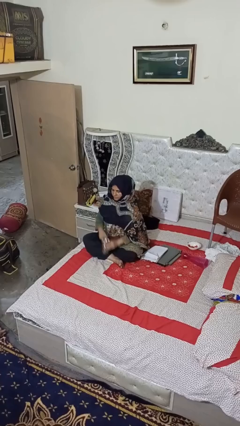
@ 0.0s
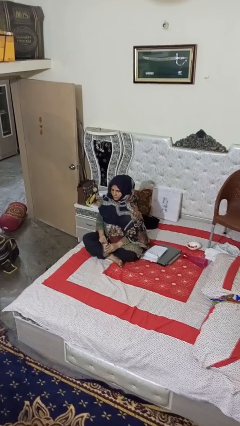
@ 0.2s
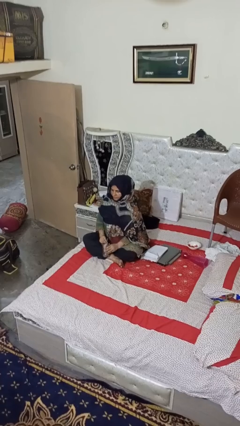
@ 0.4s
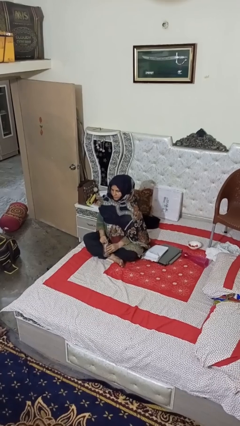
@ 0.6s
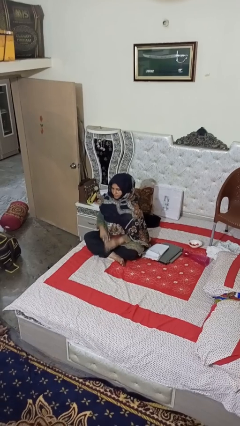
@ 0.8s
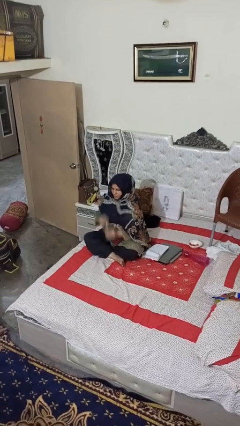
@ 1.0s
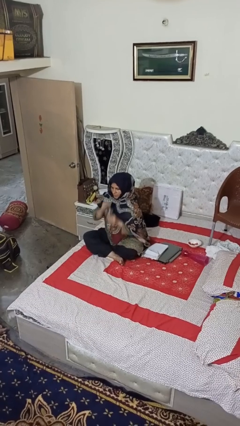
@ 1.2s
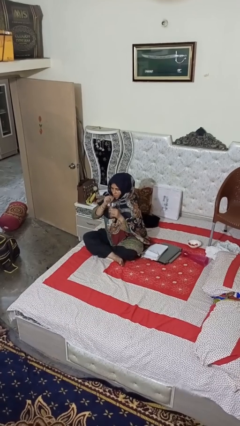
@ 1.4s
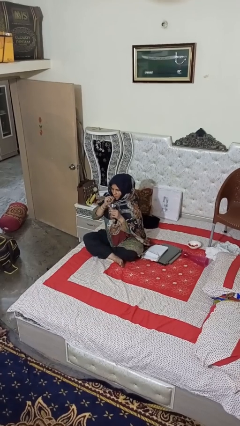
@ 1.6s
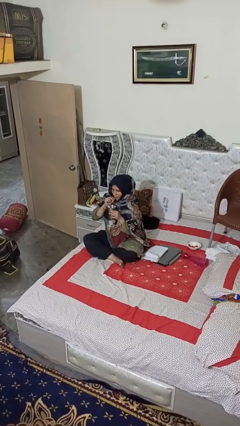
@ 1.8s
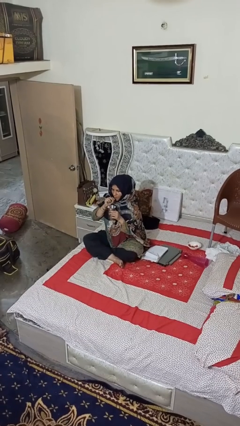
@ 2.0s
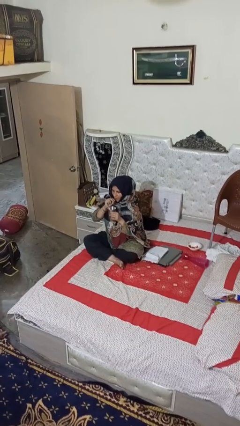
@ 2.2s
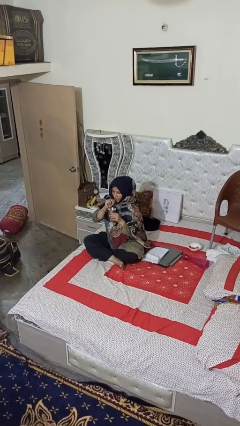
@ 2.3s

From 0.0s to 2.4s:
person drinks from straw

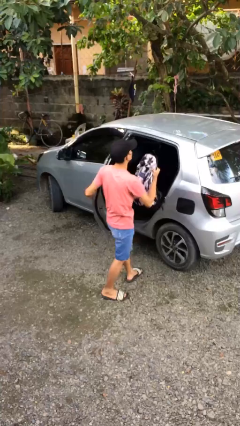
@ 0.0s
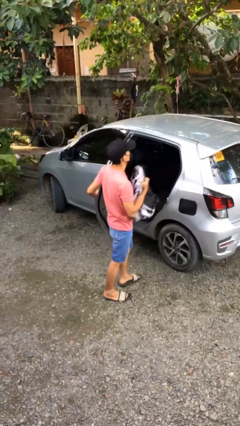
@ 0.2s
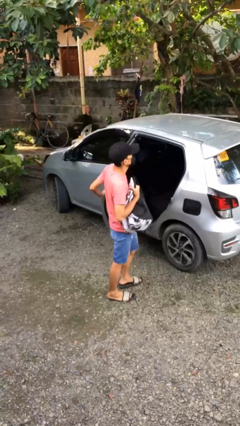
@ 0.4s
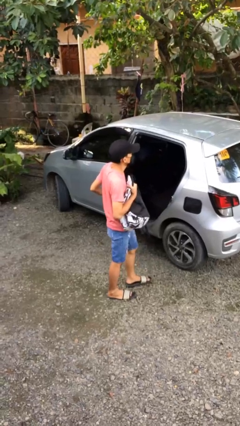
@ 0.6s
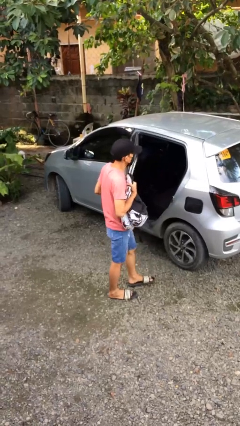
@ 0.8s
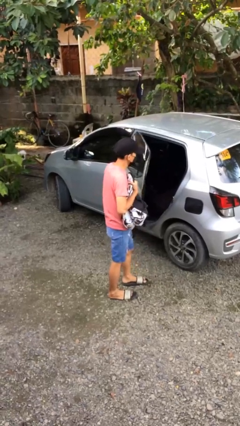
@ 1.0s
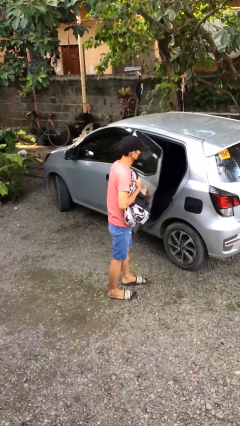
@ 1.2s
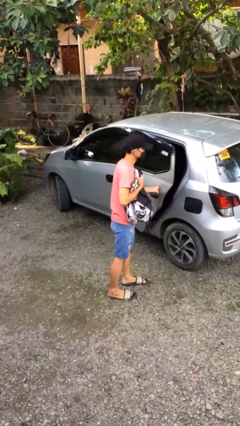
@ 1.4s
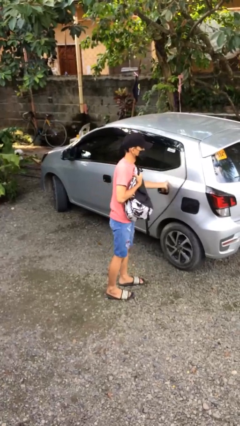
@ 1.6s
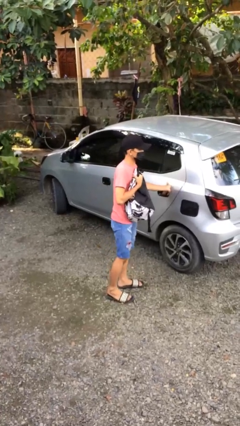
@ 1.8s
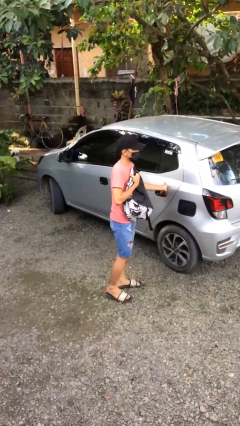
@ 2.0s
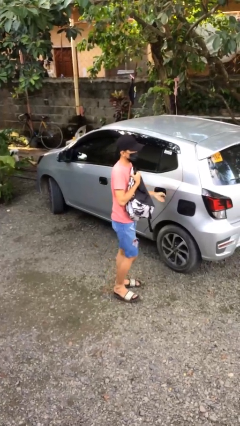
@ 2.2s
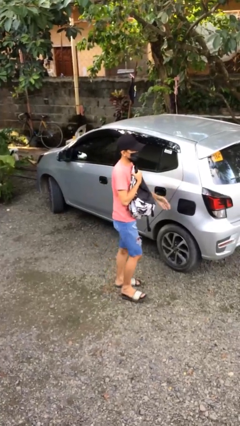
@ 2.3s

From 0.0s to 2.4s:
person closes car door

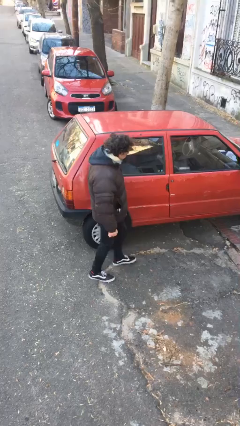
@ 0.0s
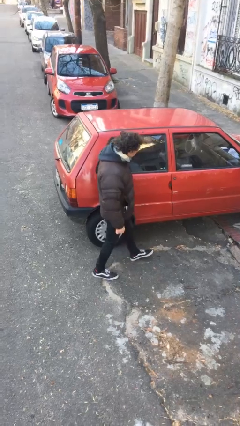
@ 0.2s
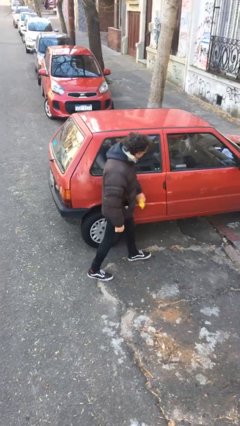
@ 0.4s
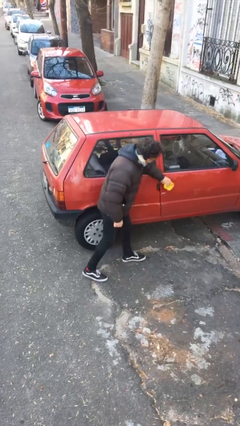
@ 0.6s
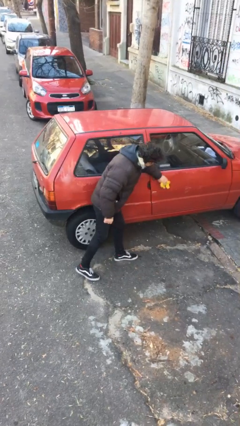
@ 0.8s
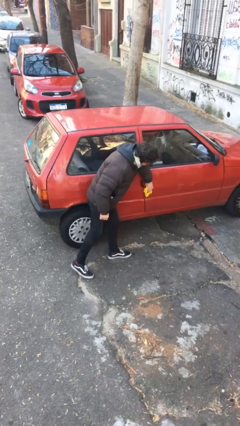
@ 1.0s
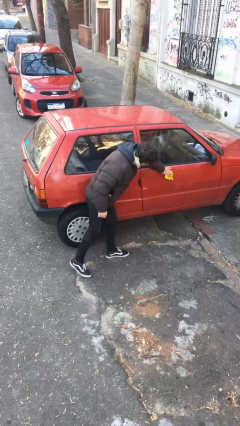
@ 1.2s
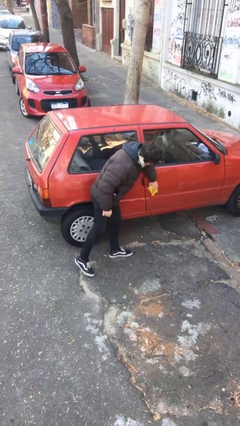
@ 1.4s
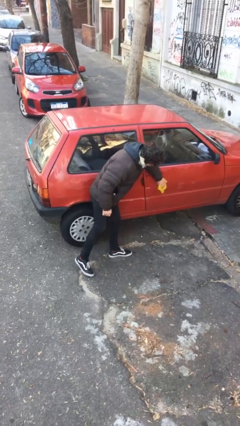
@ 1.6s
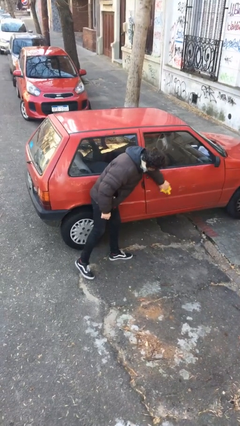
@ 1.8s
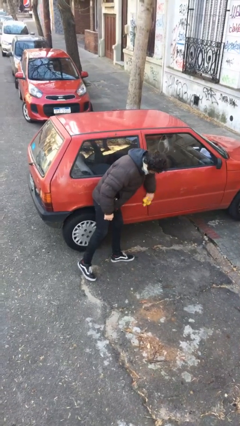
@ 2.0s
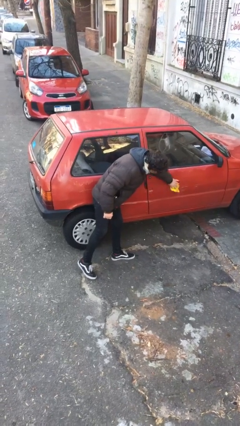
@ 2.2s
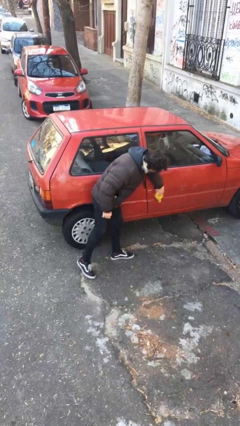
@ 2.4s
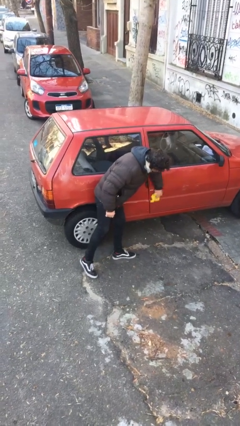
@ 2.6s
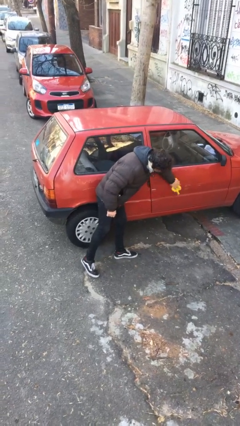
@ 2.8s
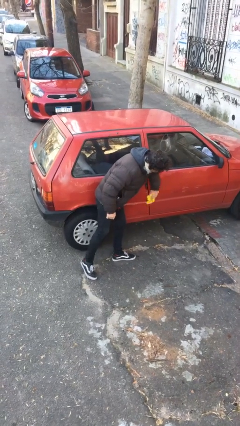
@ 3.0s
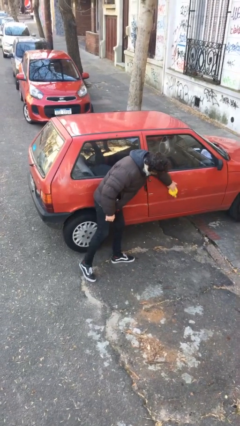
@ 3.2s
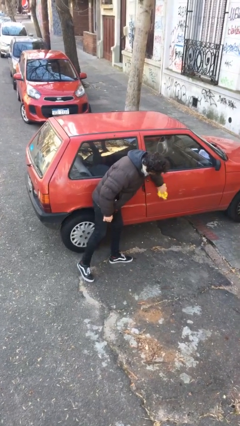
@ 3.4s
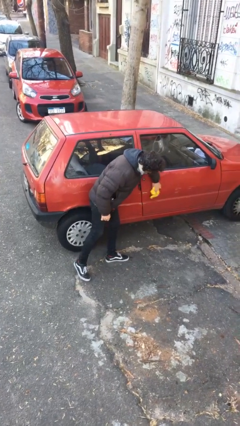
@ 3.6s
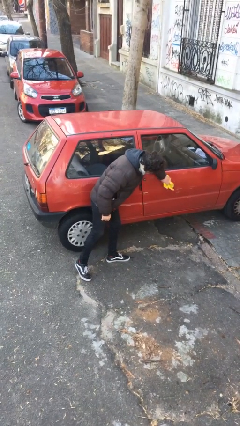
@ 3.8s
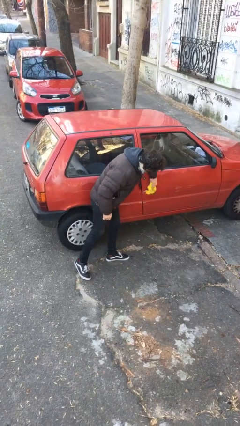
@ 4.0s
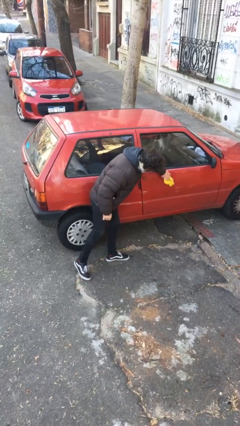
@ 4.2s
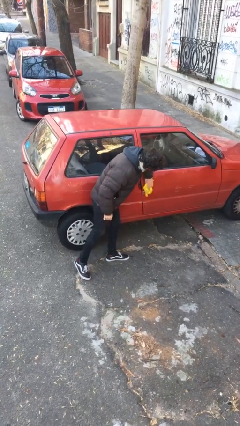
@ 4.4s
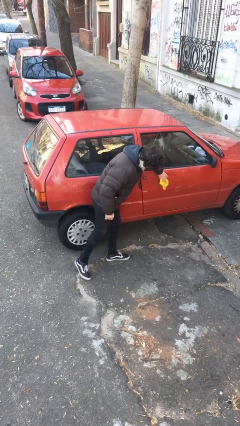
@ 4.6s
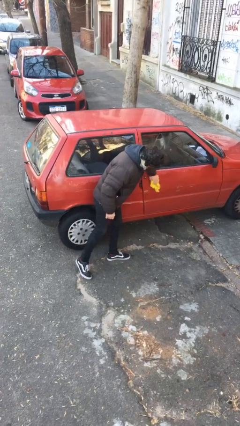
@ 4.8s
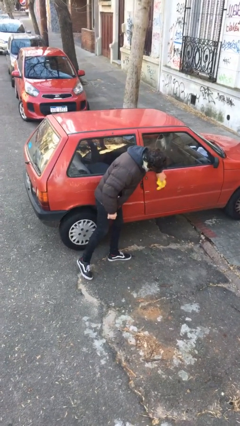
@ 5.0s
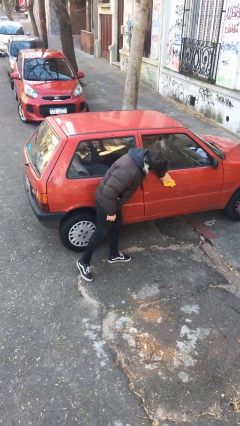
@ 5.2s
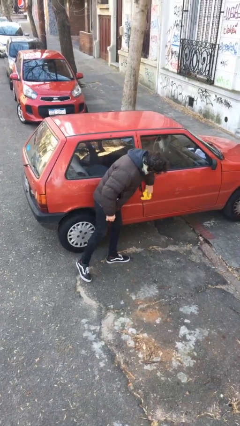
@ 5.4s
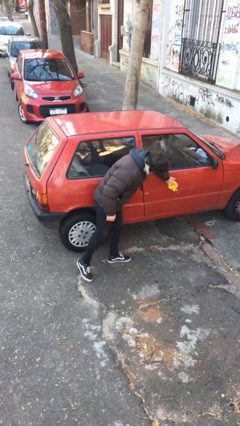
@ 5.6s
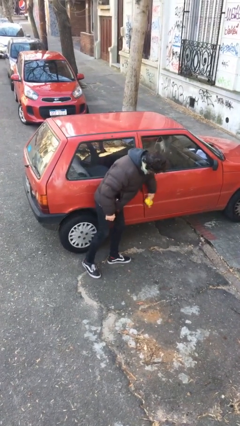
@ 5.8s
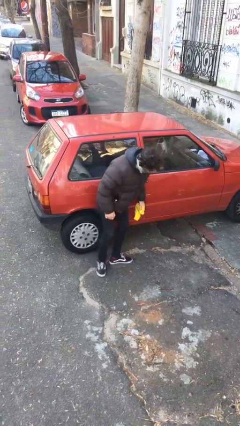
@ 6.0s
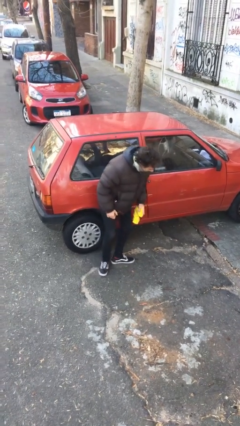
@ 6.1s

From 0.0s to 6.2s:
person polishes car with rag

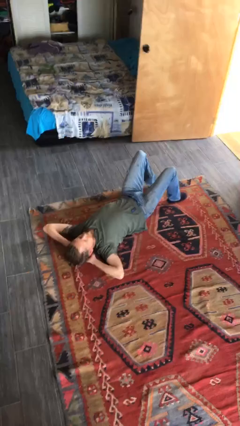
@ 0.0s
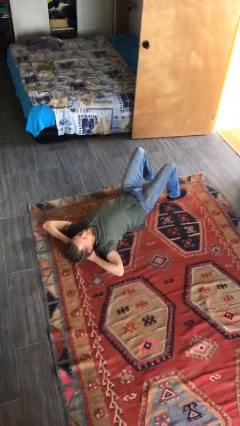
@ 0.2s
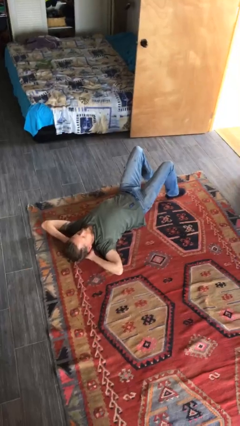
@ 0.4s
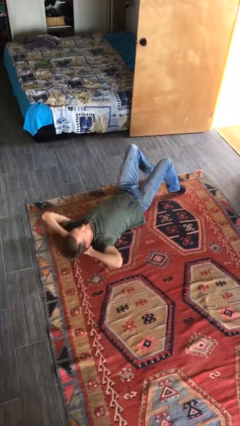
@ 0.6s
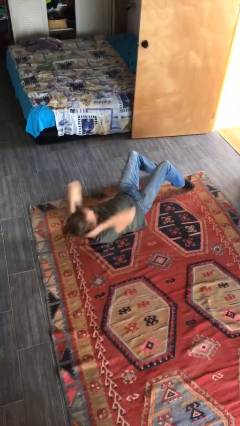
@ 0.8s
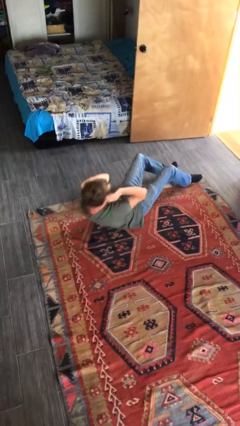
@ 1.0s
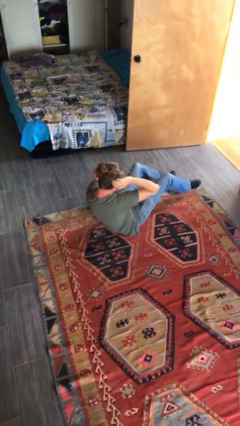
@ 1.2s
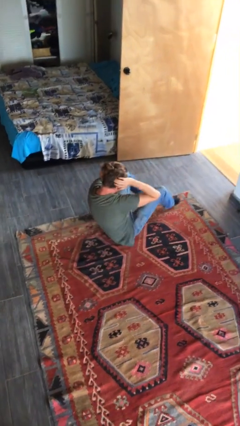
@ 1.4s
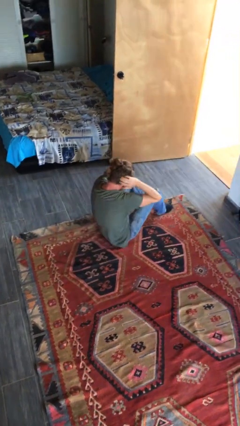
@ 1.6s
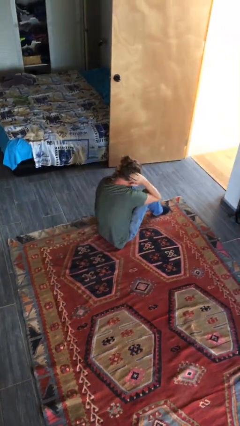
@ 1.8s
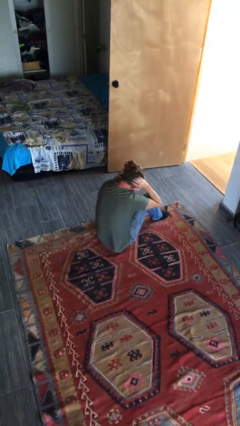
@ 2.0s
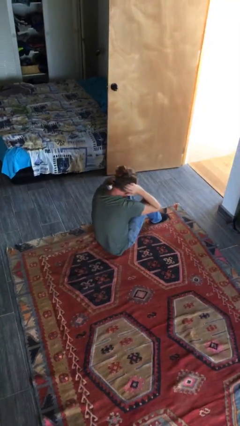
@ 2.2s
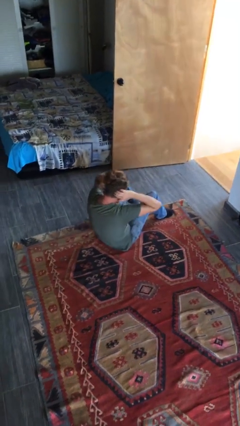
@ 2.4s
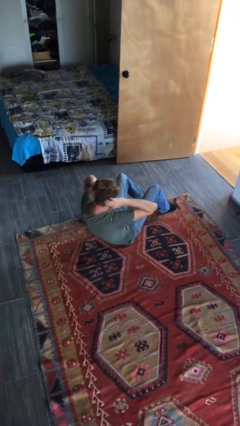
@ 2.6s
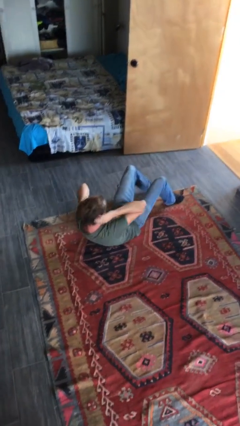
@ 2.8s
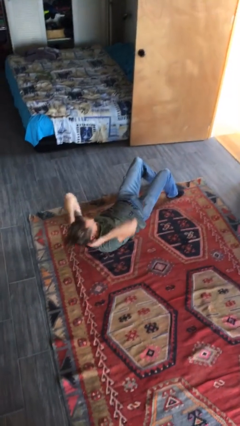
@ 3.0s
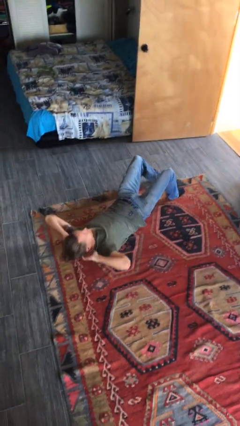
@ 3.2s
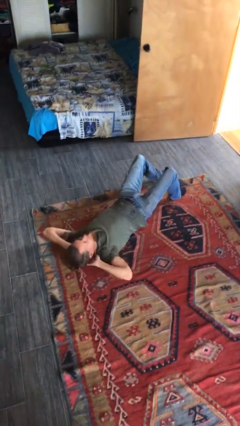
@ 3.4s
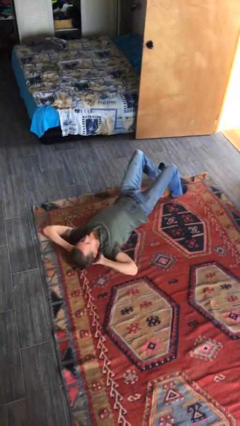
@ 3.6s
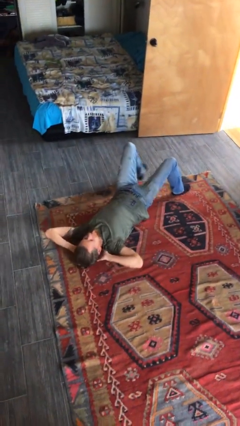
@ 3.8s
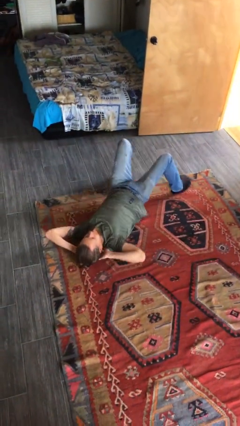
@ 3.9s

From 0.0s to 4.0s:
person exercises with situp

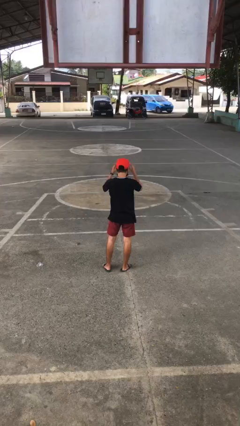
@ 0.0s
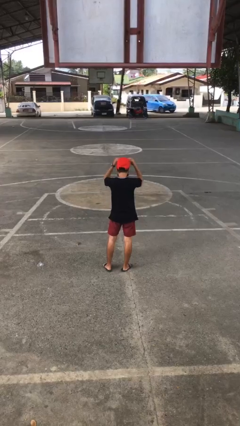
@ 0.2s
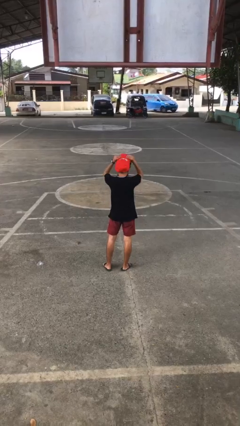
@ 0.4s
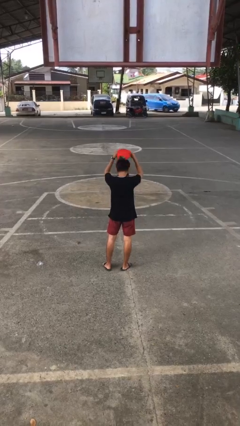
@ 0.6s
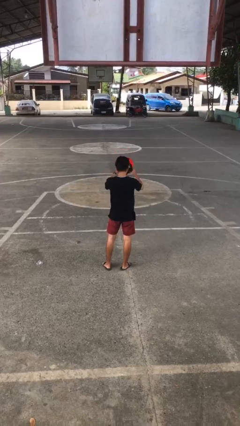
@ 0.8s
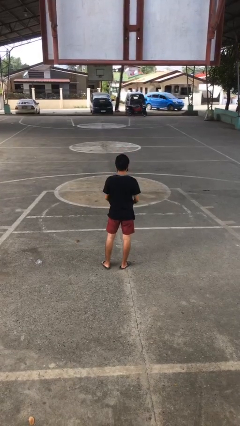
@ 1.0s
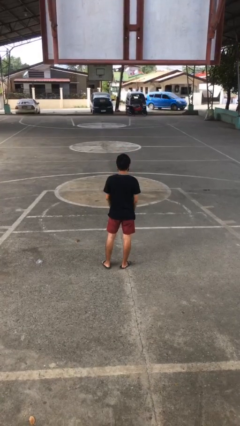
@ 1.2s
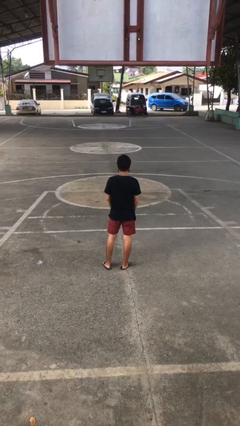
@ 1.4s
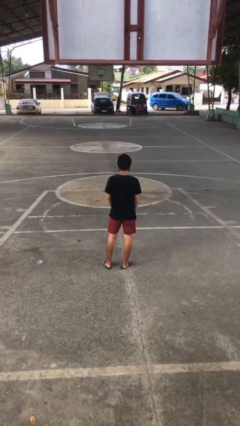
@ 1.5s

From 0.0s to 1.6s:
person takes off hat

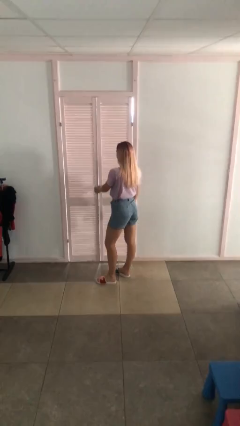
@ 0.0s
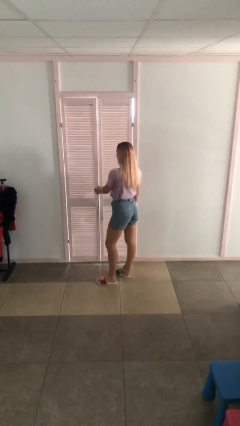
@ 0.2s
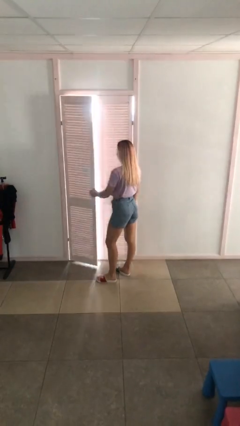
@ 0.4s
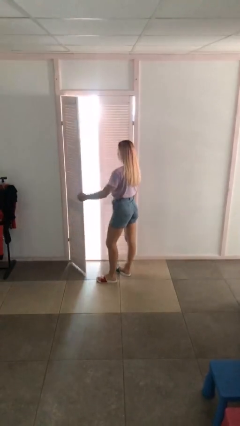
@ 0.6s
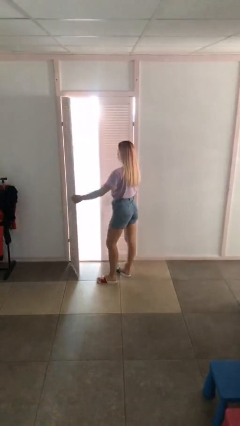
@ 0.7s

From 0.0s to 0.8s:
person opens facility door

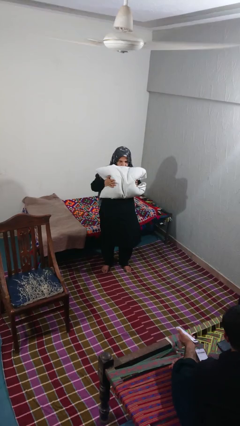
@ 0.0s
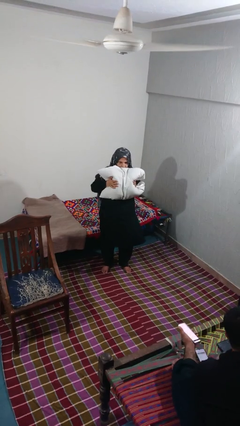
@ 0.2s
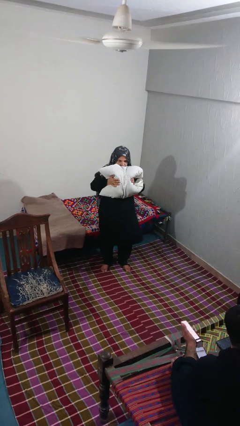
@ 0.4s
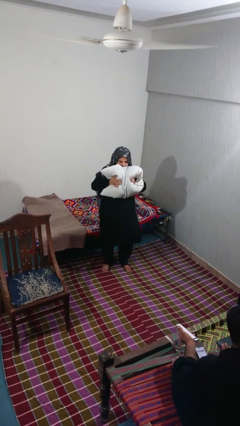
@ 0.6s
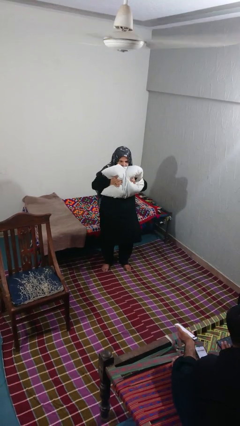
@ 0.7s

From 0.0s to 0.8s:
person squeezes object
